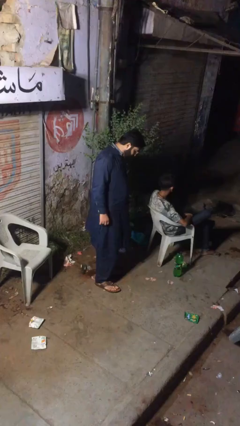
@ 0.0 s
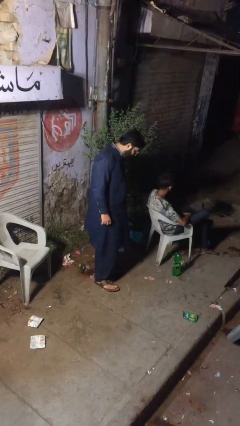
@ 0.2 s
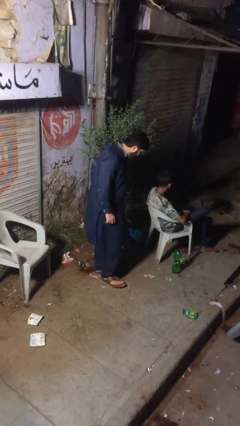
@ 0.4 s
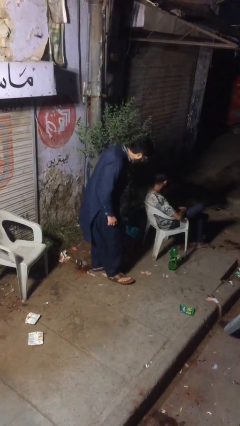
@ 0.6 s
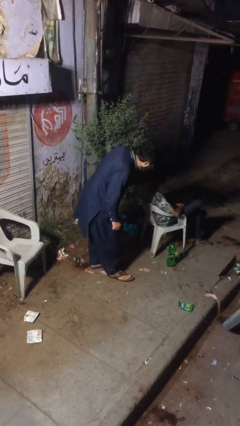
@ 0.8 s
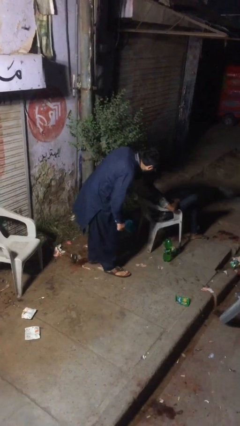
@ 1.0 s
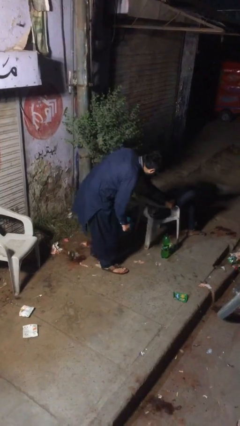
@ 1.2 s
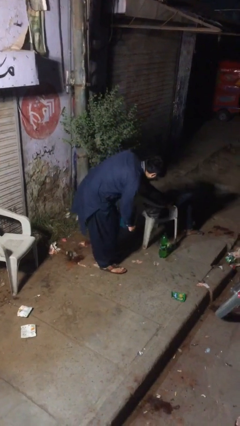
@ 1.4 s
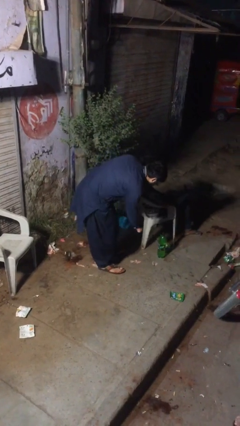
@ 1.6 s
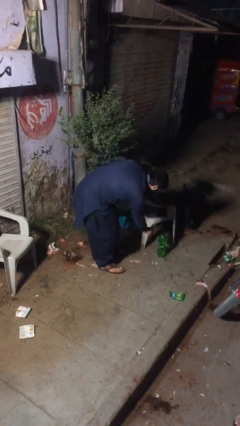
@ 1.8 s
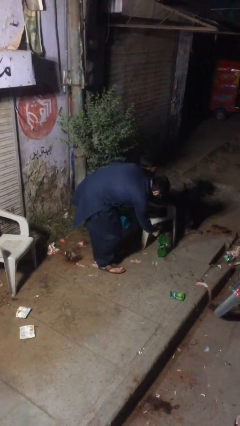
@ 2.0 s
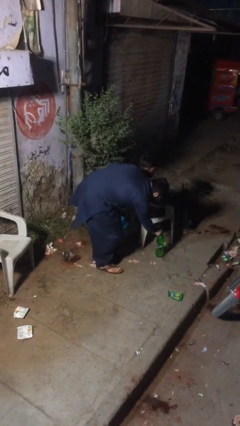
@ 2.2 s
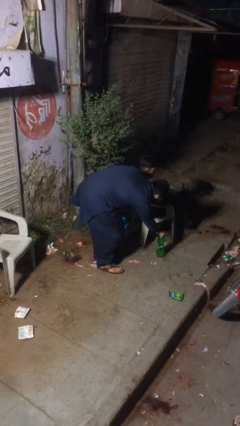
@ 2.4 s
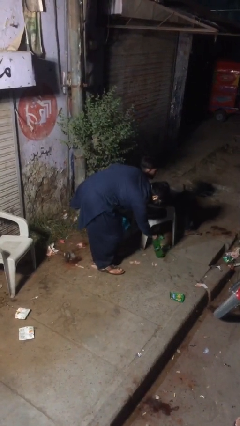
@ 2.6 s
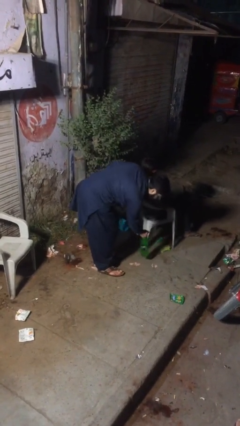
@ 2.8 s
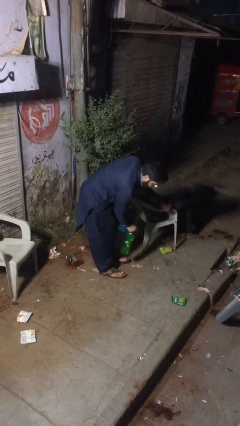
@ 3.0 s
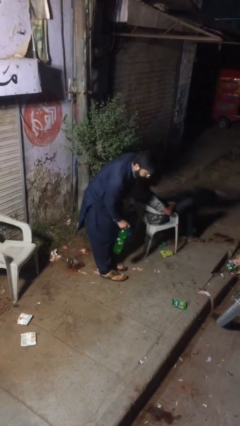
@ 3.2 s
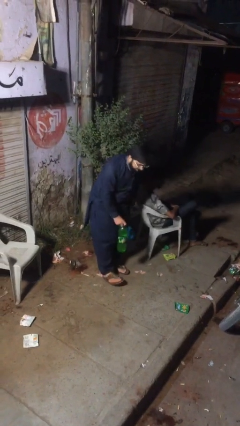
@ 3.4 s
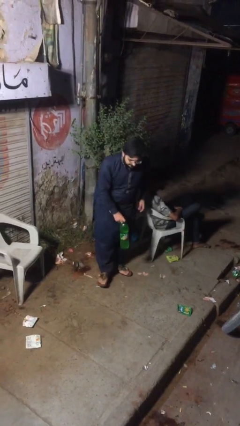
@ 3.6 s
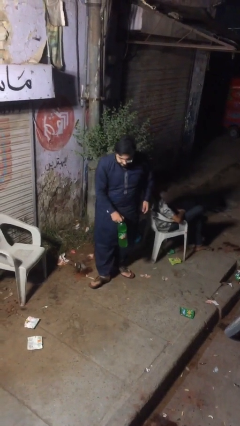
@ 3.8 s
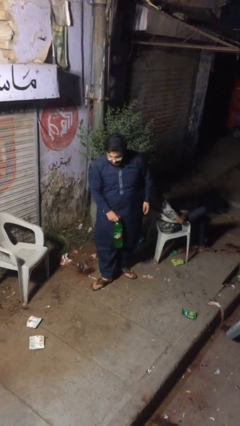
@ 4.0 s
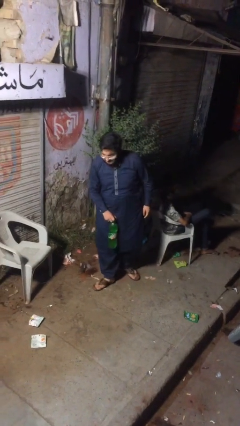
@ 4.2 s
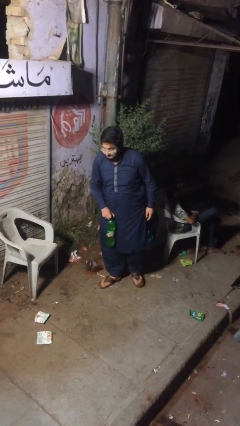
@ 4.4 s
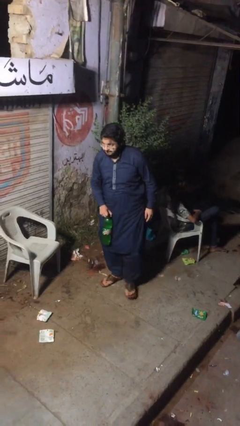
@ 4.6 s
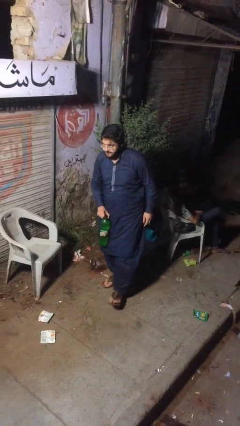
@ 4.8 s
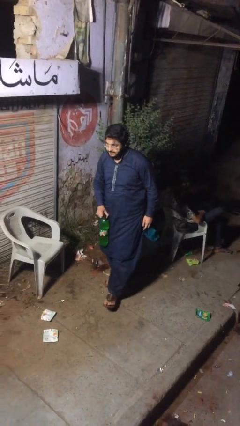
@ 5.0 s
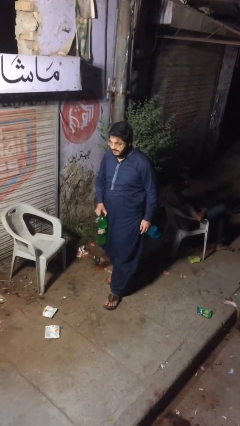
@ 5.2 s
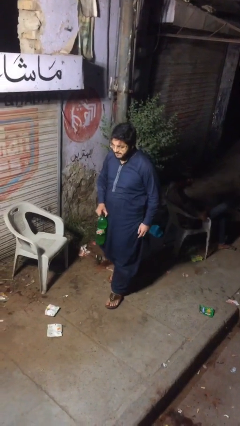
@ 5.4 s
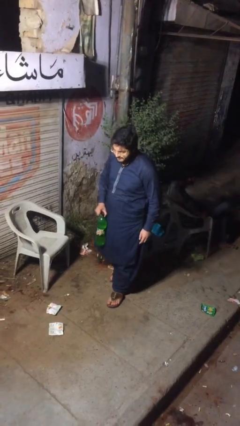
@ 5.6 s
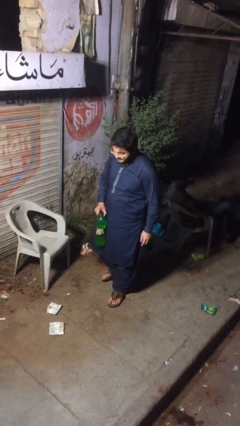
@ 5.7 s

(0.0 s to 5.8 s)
person steals object from person

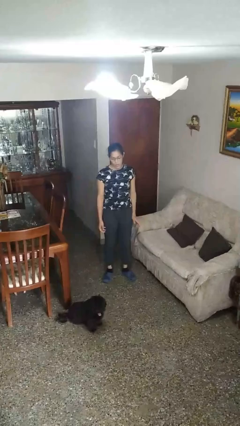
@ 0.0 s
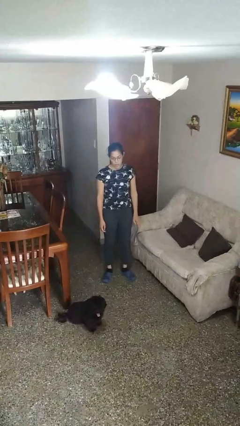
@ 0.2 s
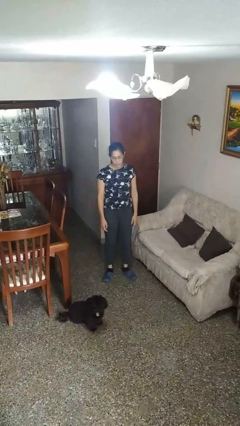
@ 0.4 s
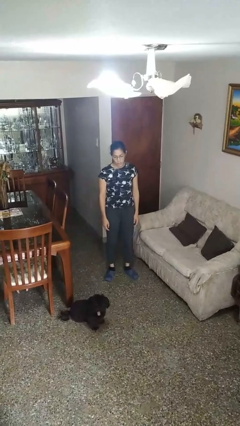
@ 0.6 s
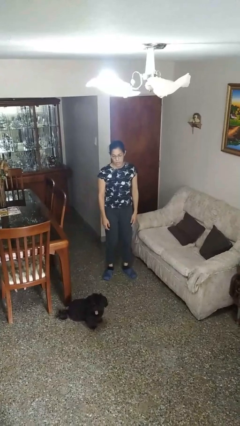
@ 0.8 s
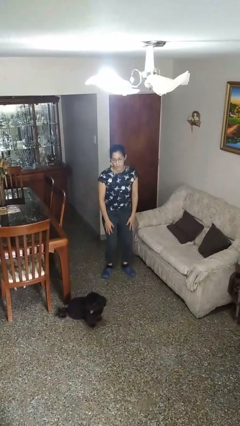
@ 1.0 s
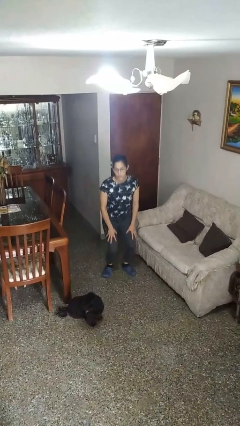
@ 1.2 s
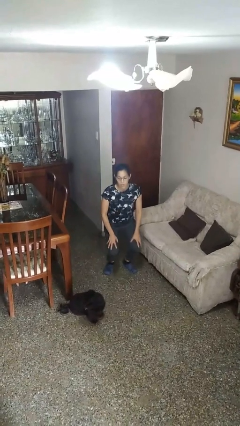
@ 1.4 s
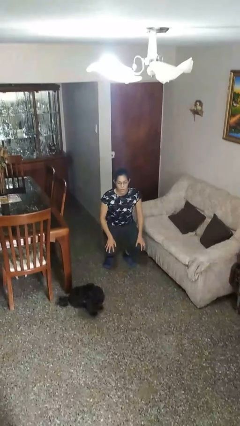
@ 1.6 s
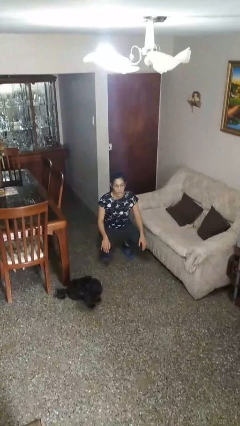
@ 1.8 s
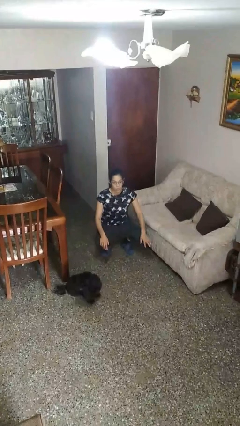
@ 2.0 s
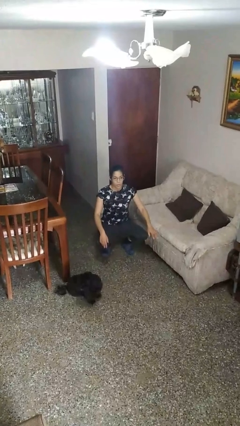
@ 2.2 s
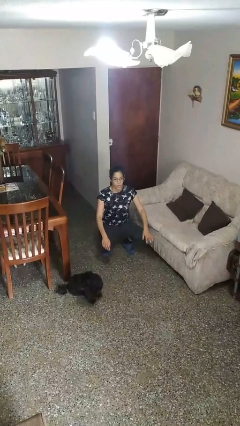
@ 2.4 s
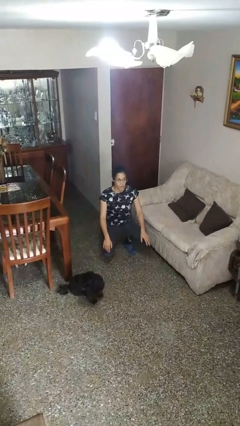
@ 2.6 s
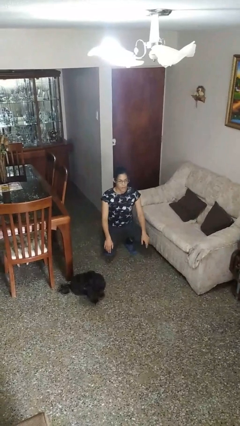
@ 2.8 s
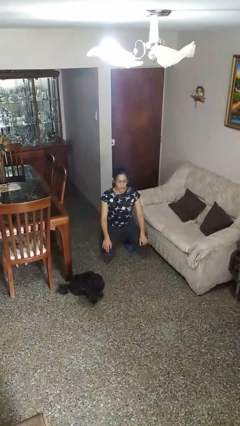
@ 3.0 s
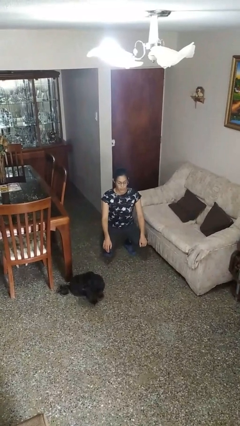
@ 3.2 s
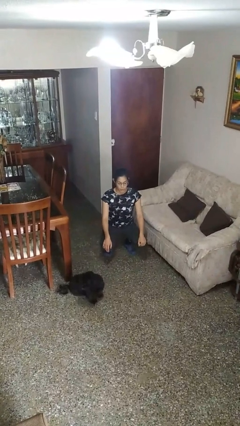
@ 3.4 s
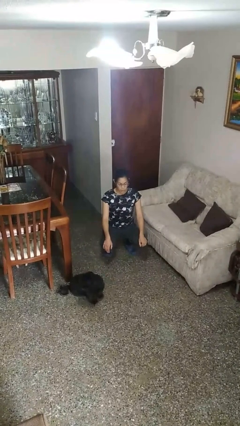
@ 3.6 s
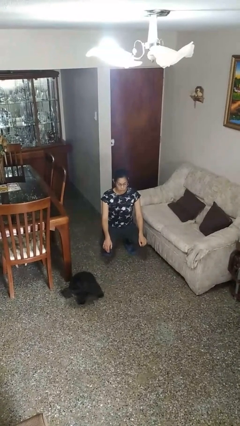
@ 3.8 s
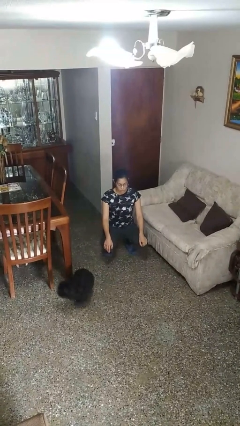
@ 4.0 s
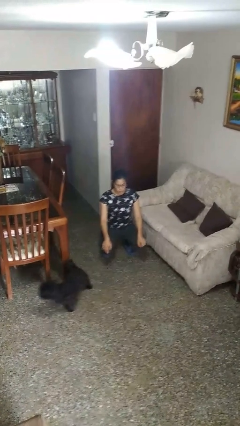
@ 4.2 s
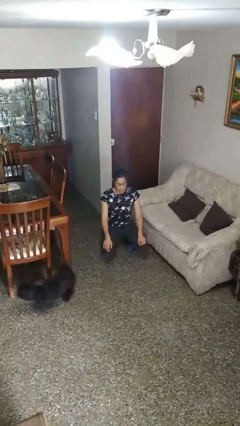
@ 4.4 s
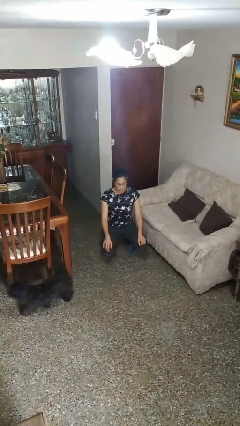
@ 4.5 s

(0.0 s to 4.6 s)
person squats

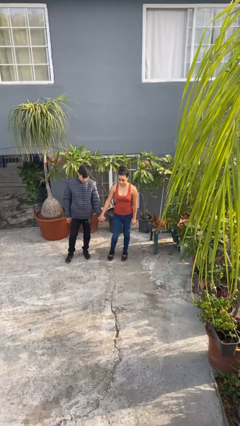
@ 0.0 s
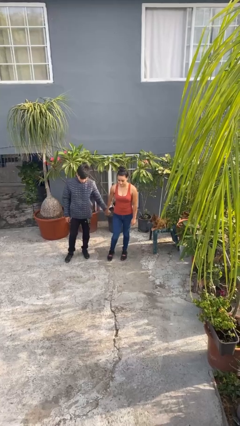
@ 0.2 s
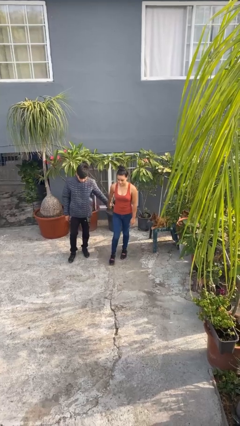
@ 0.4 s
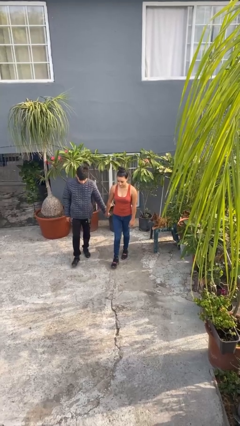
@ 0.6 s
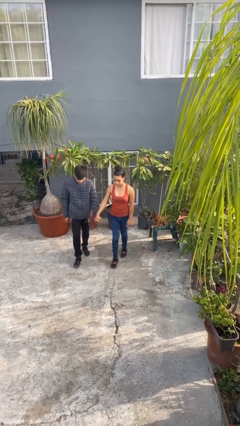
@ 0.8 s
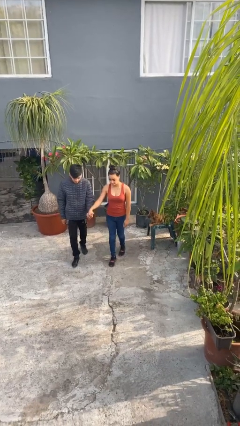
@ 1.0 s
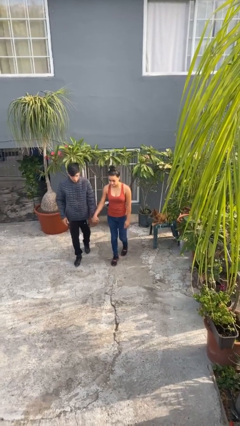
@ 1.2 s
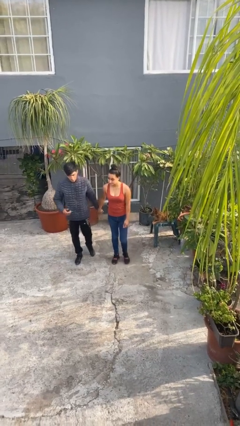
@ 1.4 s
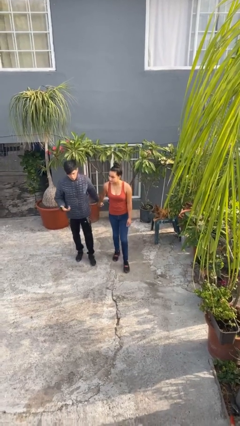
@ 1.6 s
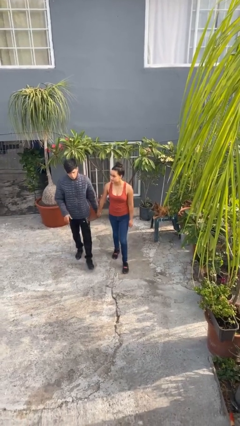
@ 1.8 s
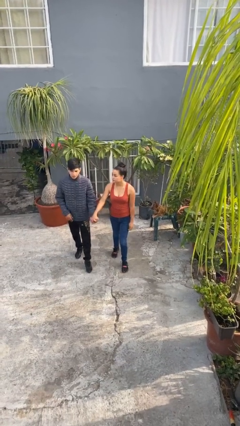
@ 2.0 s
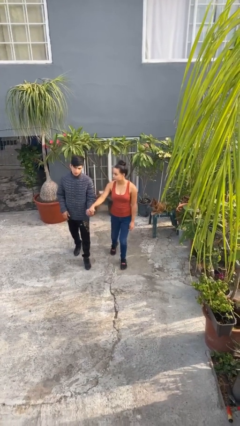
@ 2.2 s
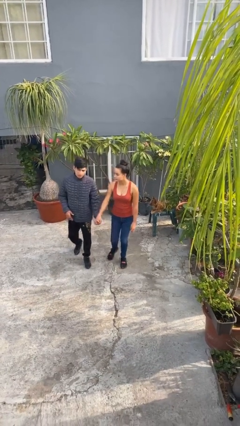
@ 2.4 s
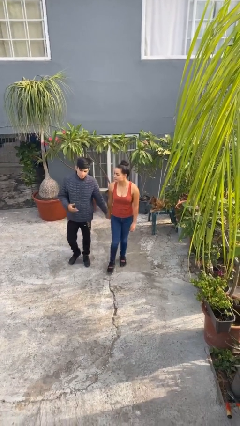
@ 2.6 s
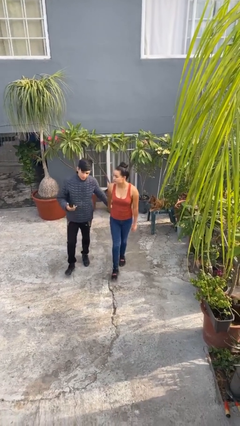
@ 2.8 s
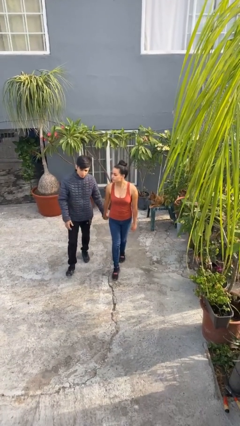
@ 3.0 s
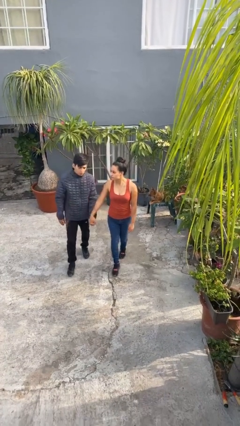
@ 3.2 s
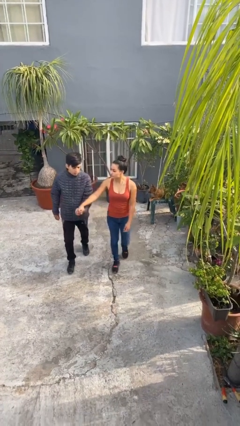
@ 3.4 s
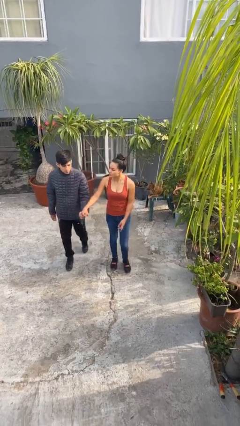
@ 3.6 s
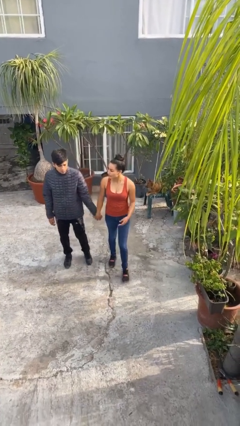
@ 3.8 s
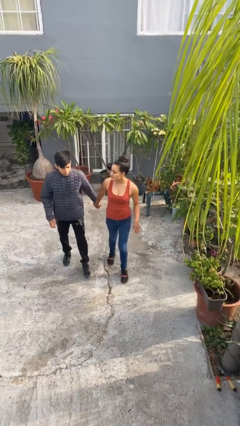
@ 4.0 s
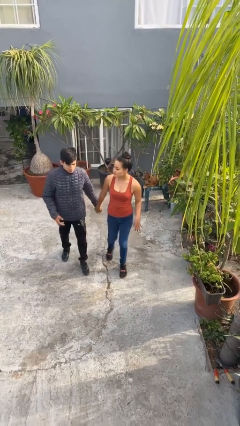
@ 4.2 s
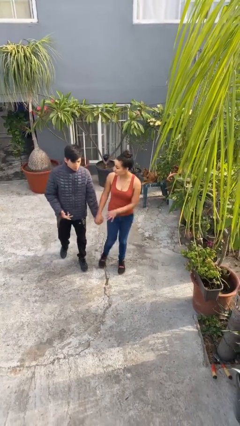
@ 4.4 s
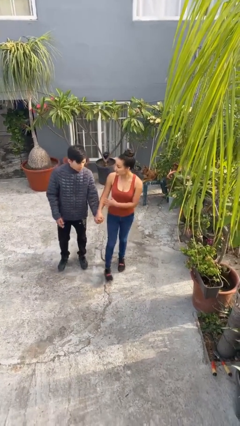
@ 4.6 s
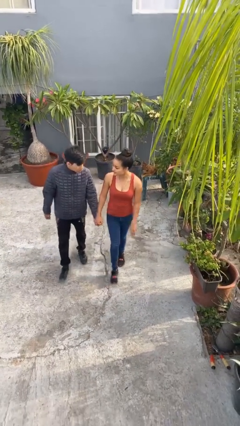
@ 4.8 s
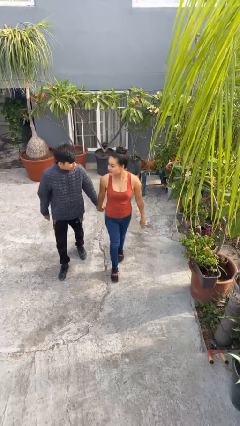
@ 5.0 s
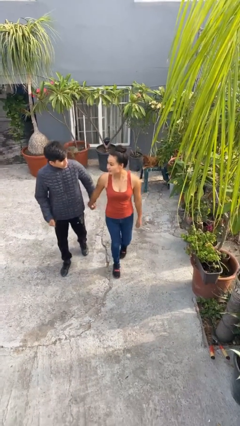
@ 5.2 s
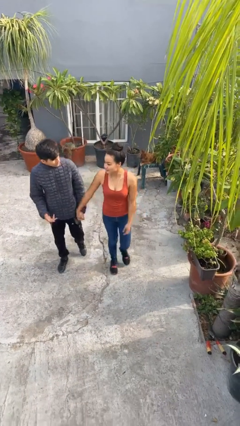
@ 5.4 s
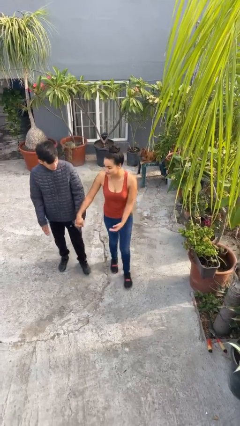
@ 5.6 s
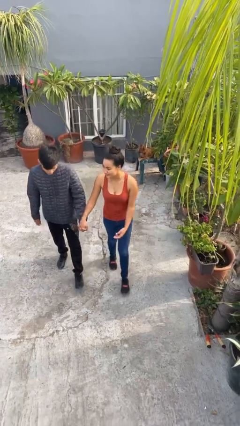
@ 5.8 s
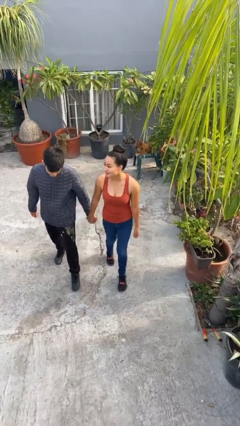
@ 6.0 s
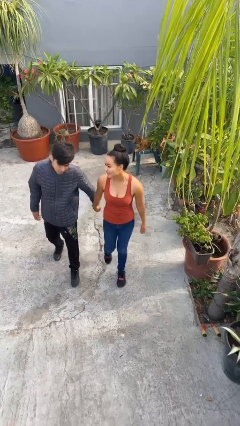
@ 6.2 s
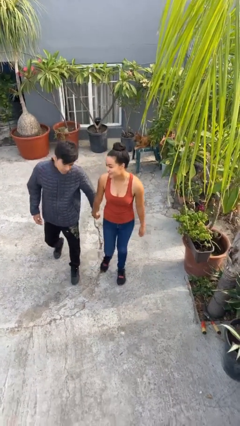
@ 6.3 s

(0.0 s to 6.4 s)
person holds hand

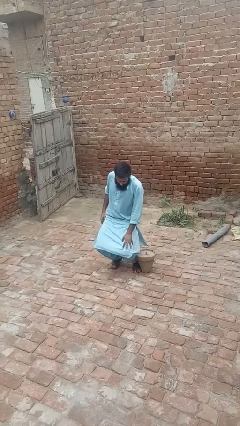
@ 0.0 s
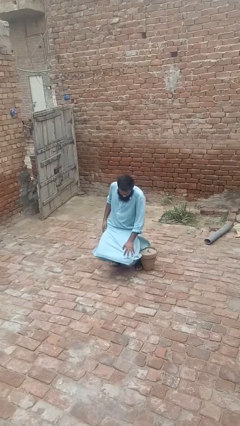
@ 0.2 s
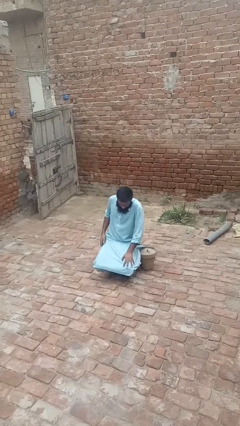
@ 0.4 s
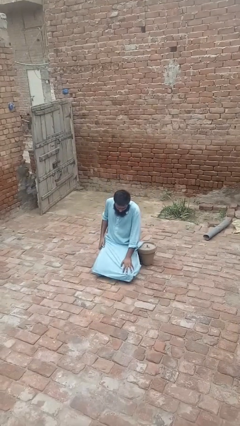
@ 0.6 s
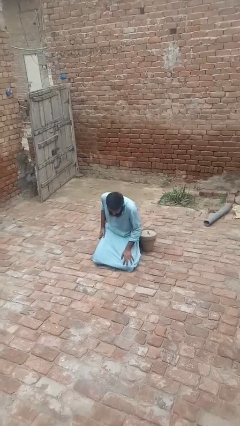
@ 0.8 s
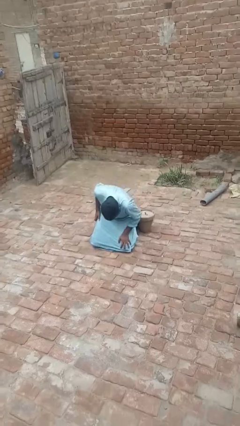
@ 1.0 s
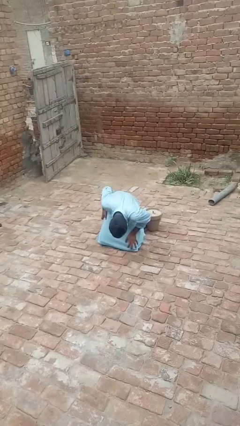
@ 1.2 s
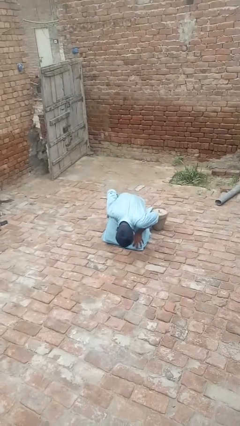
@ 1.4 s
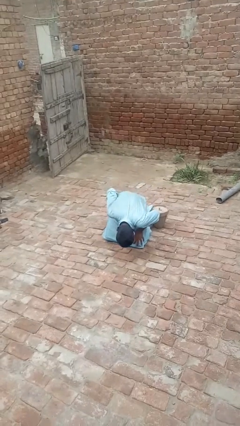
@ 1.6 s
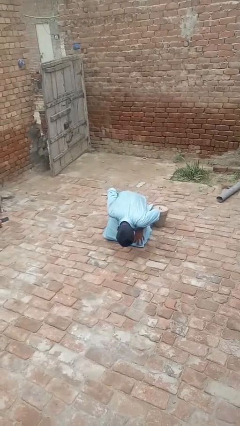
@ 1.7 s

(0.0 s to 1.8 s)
person lies down on floor
